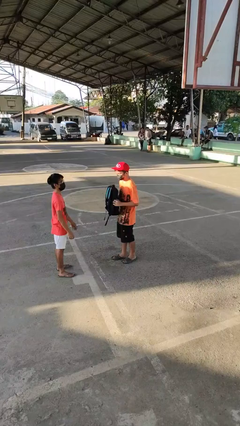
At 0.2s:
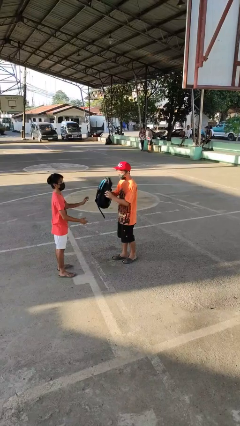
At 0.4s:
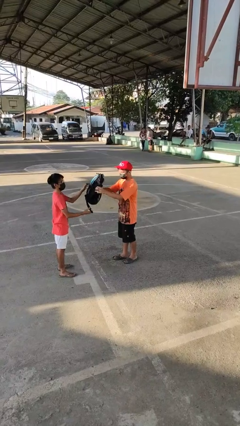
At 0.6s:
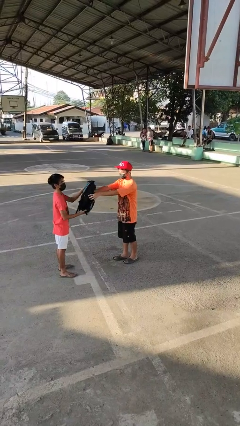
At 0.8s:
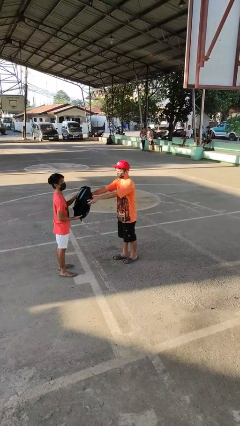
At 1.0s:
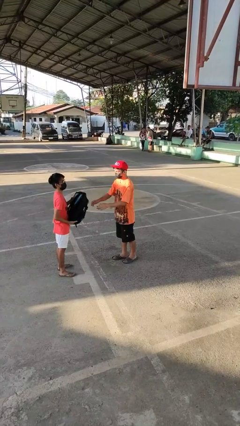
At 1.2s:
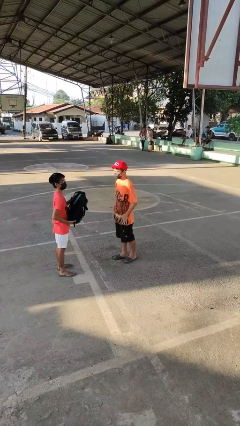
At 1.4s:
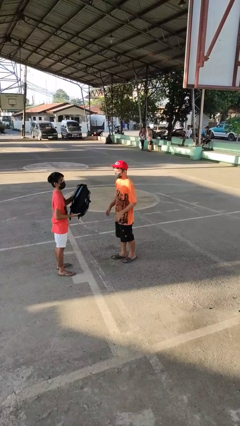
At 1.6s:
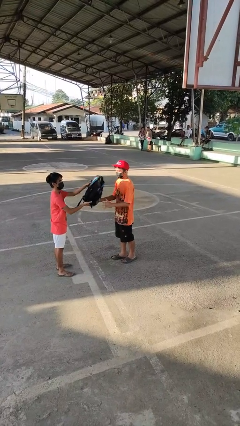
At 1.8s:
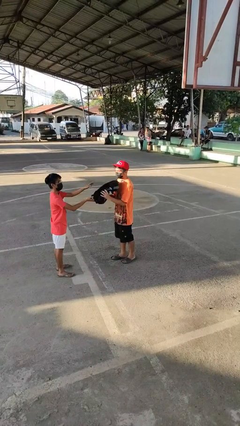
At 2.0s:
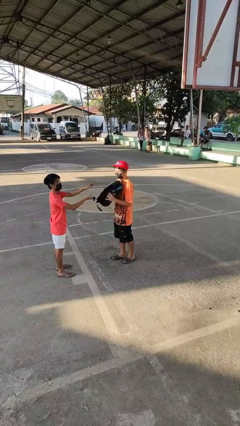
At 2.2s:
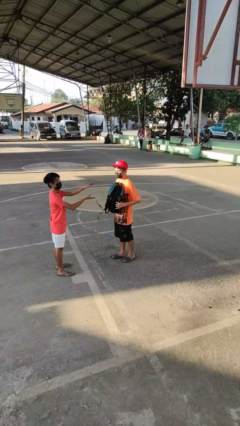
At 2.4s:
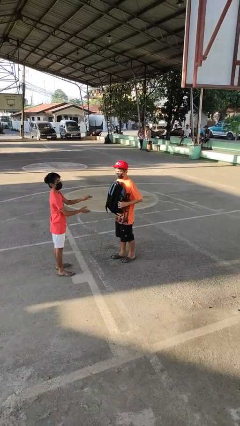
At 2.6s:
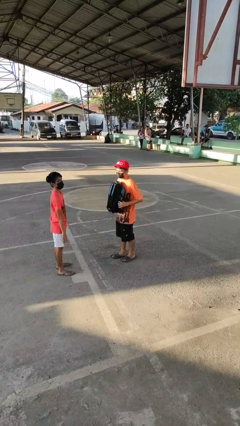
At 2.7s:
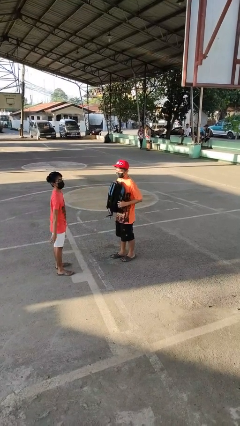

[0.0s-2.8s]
person transfers object to person

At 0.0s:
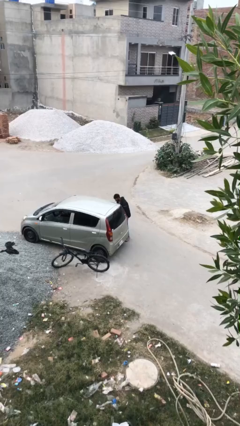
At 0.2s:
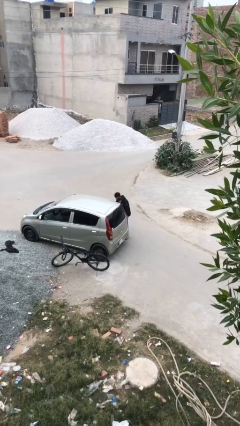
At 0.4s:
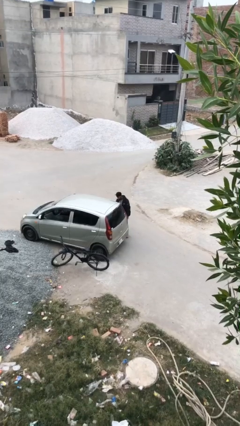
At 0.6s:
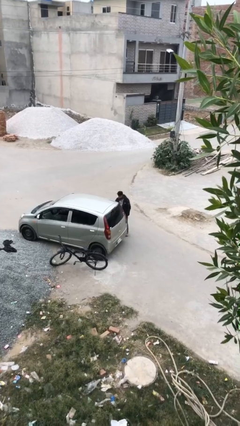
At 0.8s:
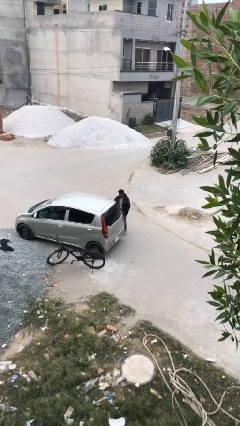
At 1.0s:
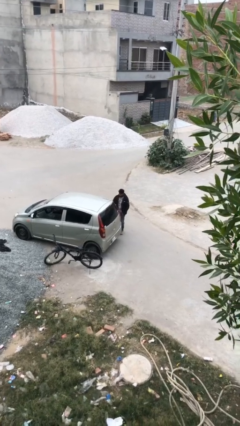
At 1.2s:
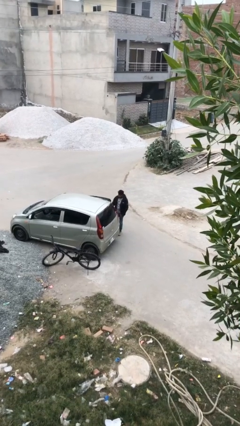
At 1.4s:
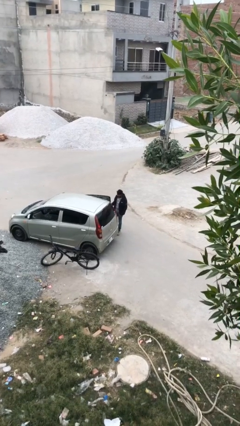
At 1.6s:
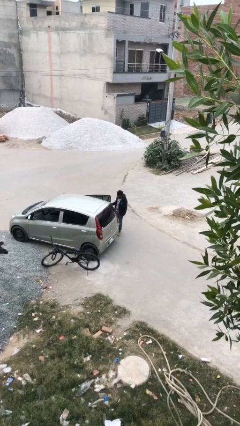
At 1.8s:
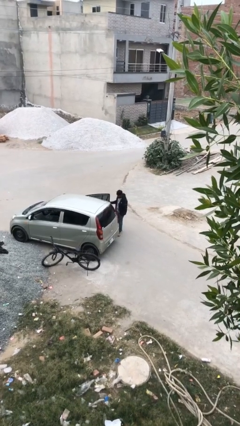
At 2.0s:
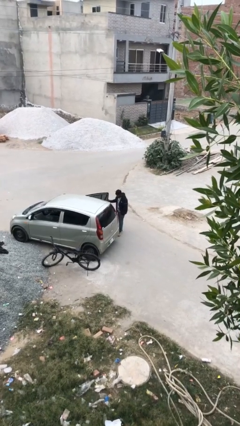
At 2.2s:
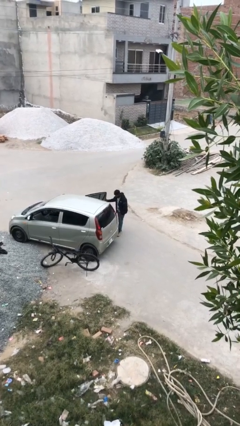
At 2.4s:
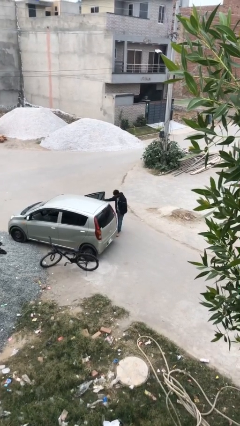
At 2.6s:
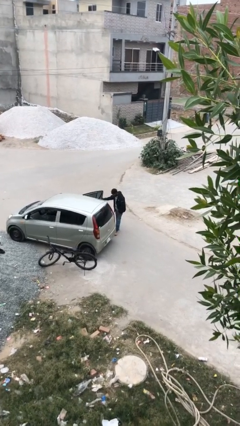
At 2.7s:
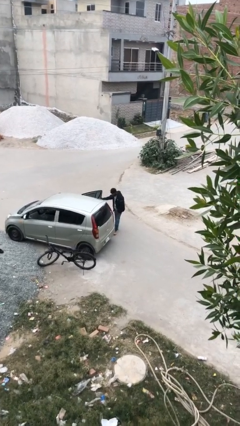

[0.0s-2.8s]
person opens car door

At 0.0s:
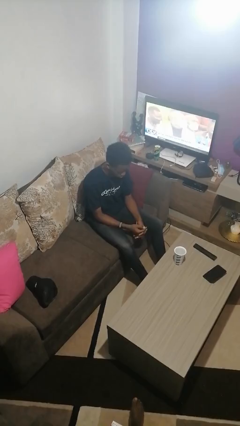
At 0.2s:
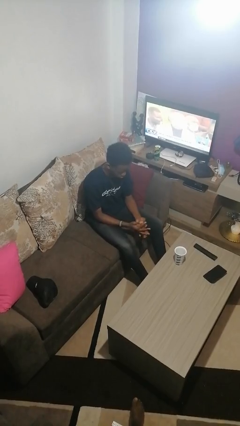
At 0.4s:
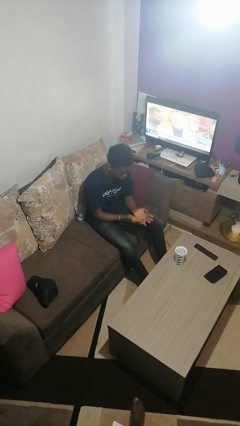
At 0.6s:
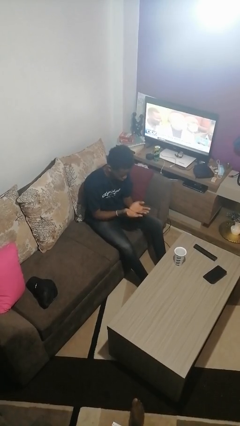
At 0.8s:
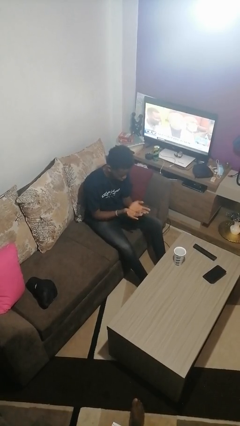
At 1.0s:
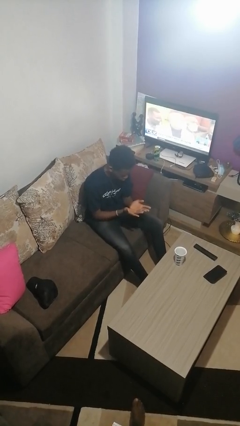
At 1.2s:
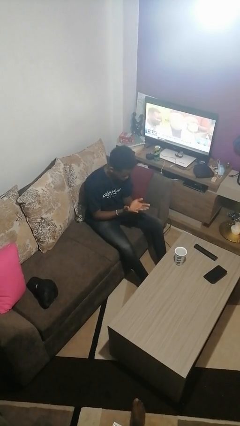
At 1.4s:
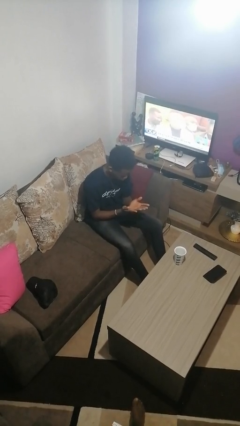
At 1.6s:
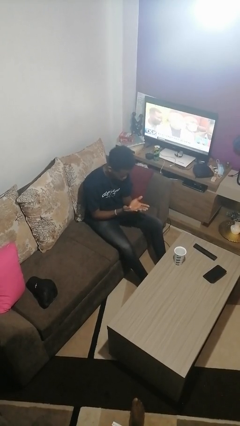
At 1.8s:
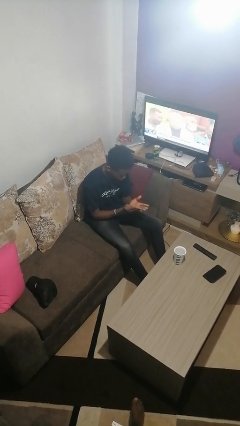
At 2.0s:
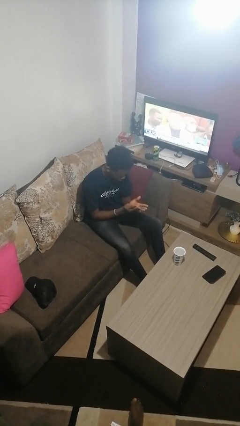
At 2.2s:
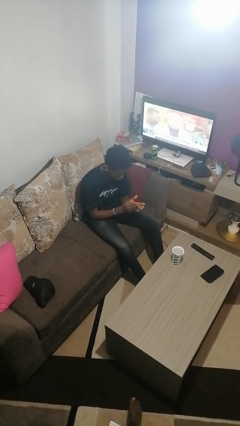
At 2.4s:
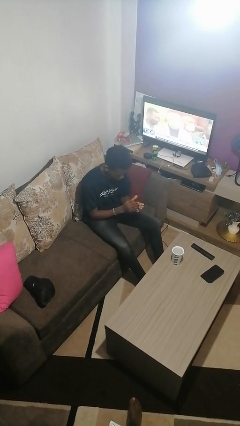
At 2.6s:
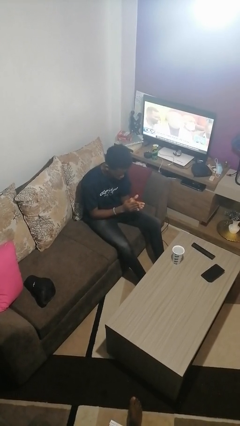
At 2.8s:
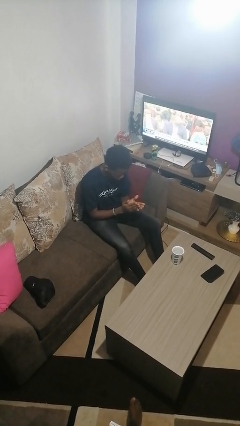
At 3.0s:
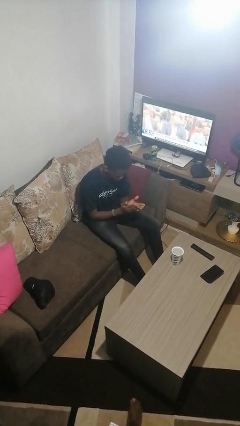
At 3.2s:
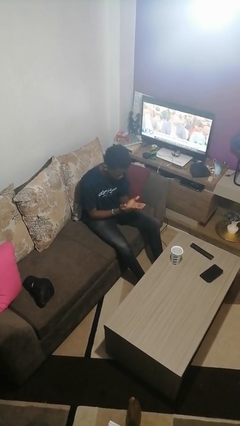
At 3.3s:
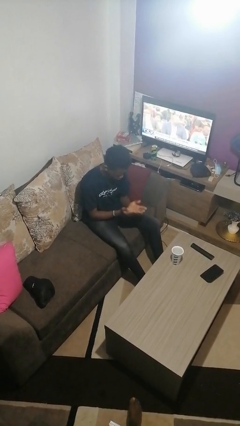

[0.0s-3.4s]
person looks at hands in lap

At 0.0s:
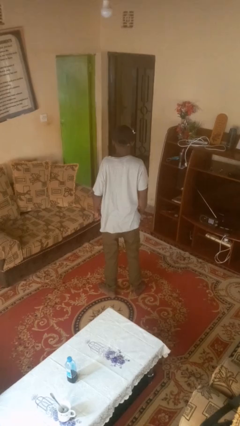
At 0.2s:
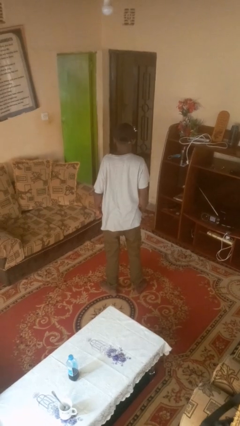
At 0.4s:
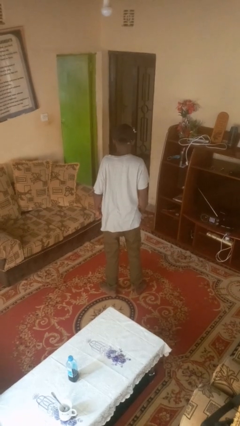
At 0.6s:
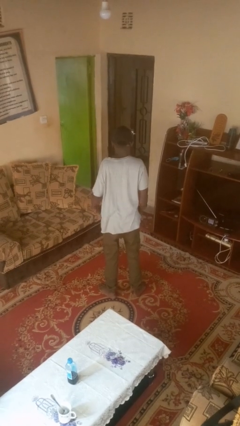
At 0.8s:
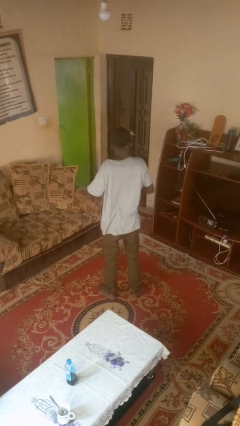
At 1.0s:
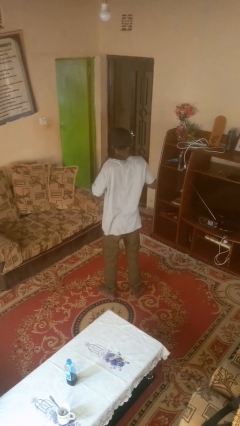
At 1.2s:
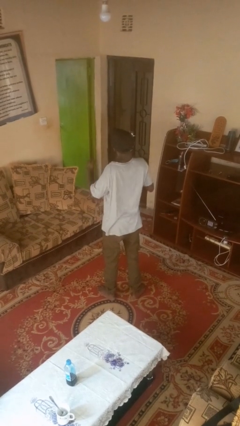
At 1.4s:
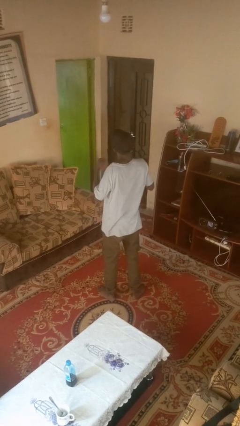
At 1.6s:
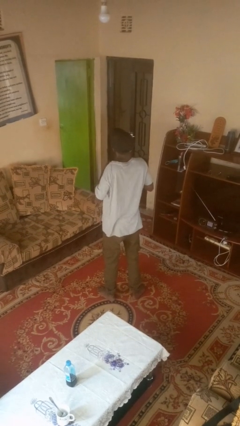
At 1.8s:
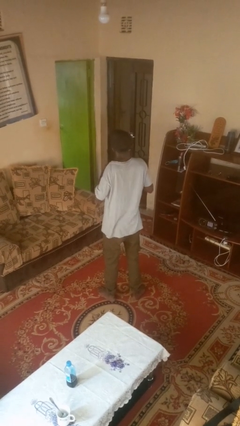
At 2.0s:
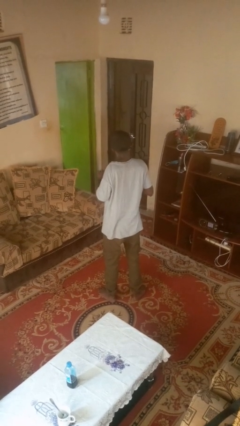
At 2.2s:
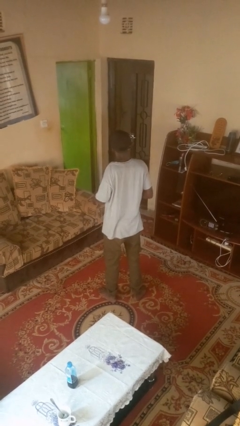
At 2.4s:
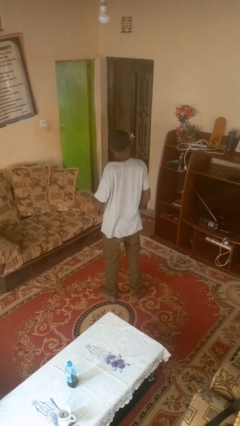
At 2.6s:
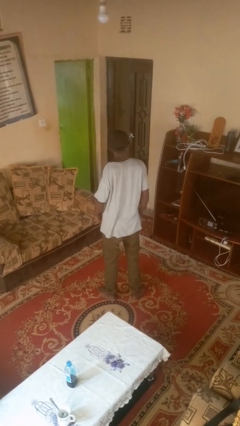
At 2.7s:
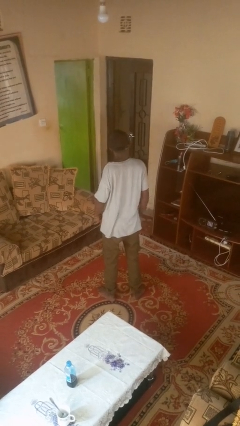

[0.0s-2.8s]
person drums on chest

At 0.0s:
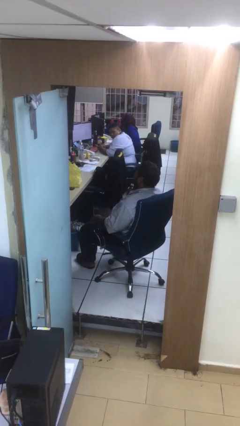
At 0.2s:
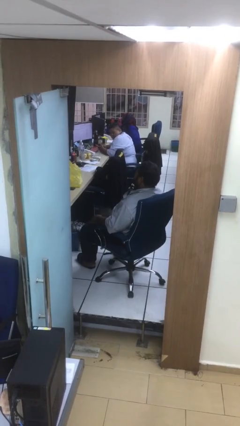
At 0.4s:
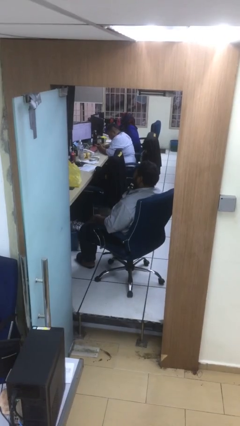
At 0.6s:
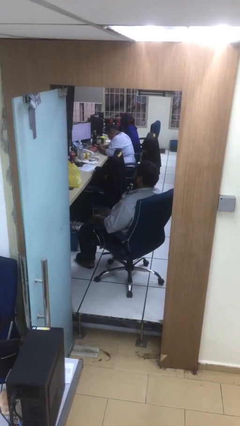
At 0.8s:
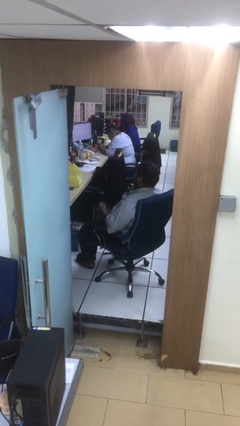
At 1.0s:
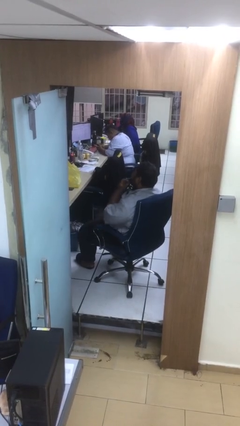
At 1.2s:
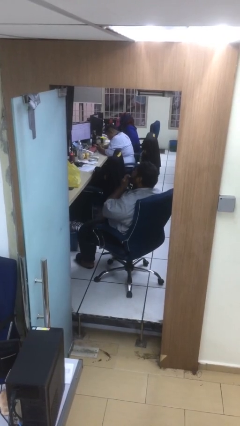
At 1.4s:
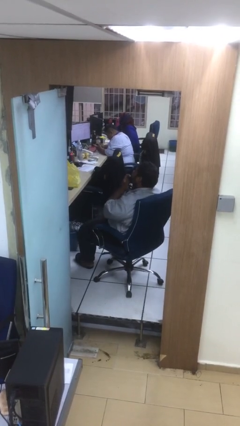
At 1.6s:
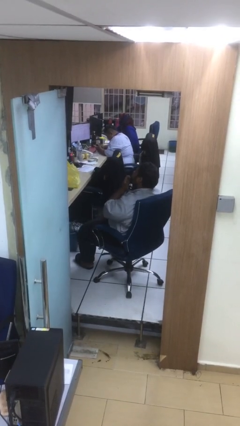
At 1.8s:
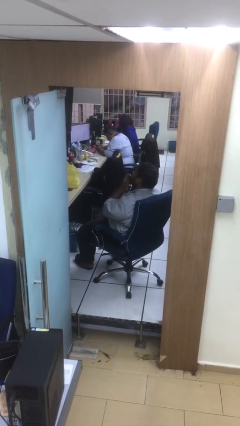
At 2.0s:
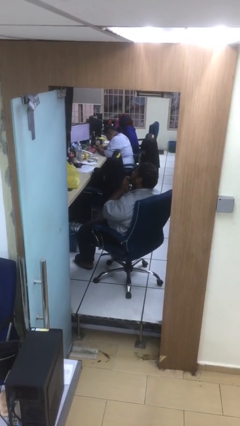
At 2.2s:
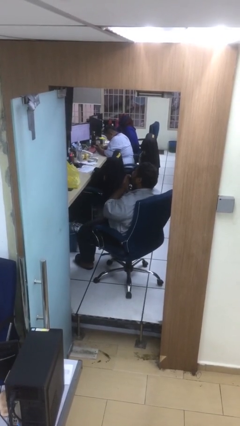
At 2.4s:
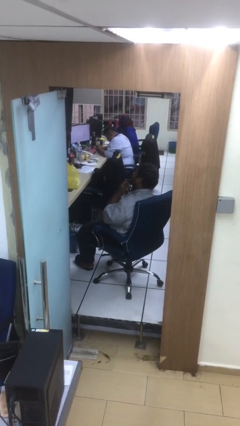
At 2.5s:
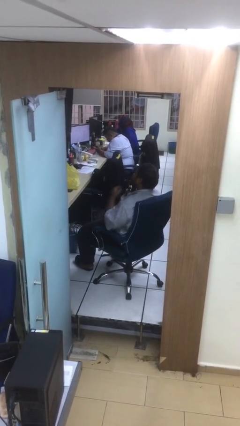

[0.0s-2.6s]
person scratches face

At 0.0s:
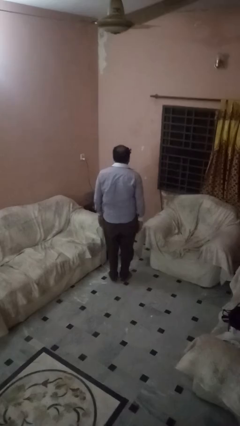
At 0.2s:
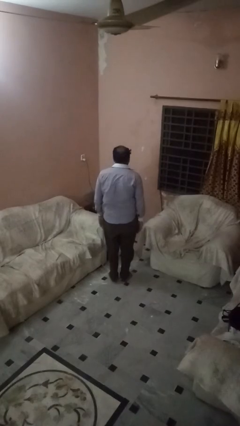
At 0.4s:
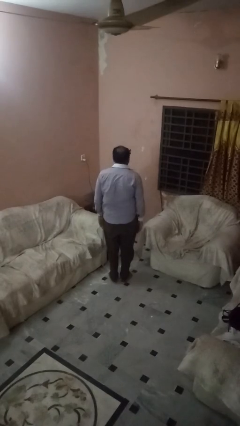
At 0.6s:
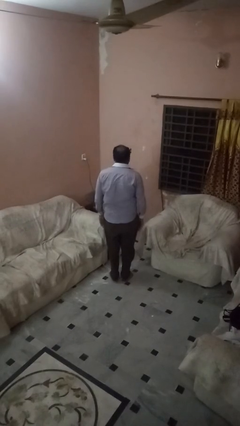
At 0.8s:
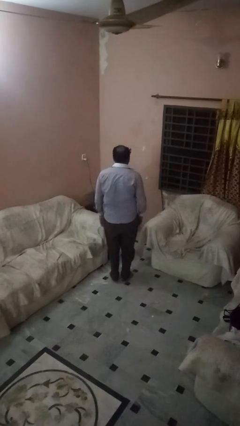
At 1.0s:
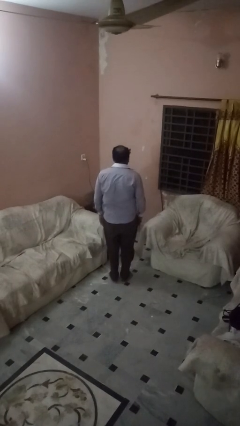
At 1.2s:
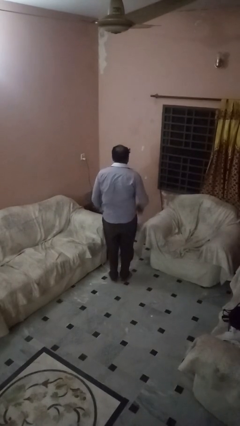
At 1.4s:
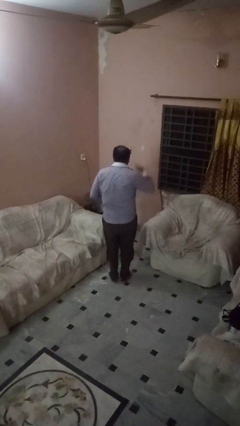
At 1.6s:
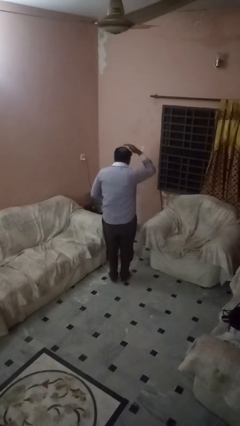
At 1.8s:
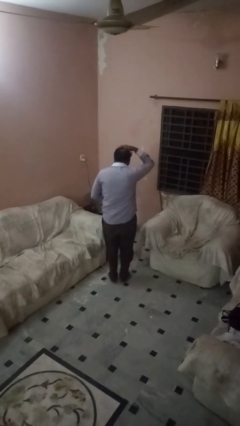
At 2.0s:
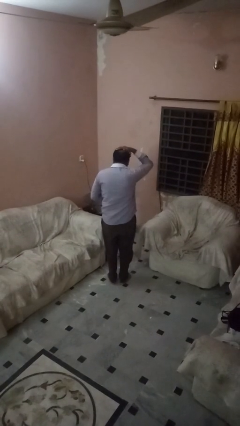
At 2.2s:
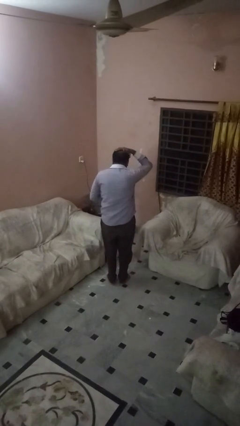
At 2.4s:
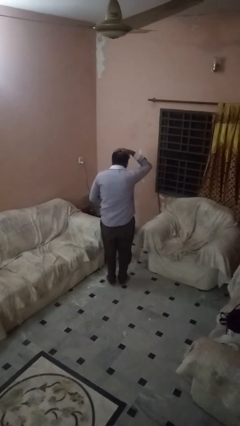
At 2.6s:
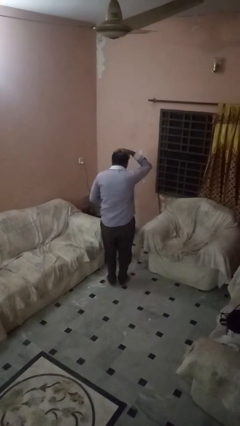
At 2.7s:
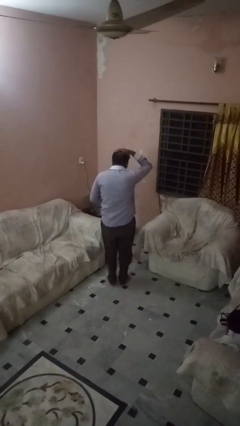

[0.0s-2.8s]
person pats head

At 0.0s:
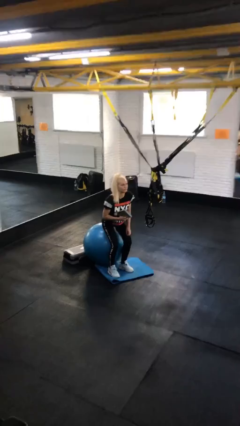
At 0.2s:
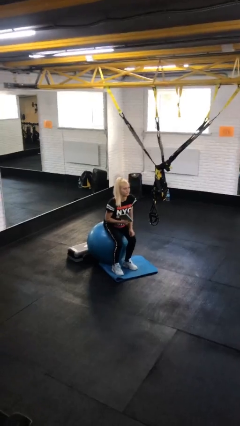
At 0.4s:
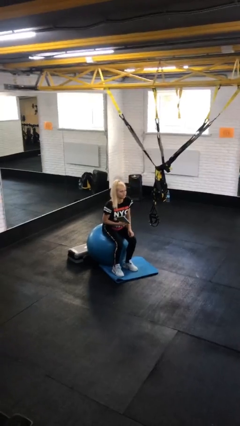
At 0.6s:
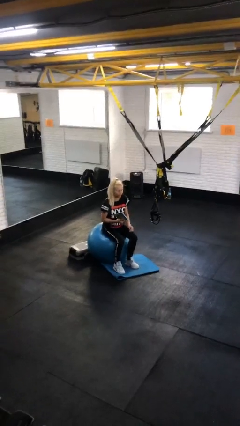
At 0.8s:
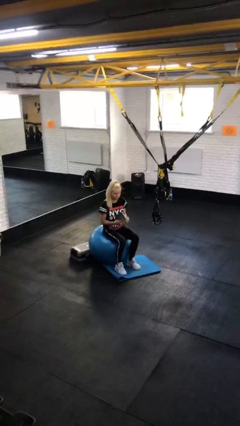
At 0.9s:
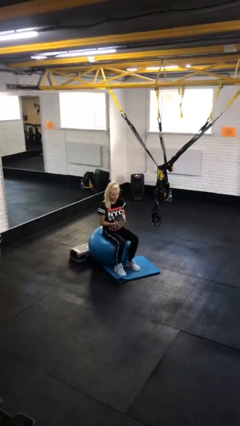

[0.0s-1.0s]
person sits down
